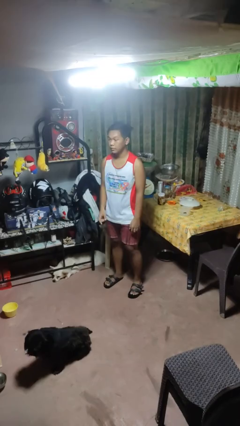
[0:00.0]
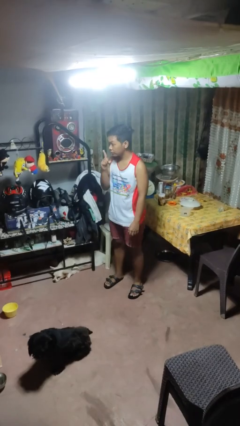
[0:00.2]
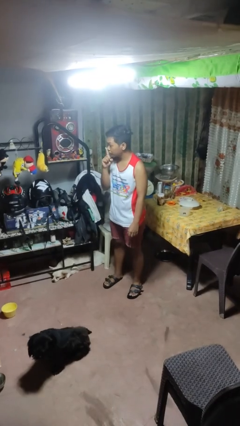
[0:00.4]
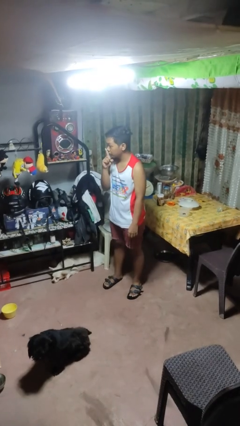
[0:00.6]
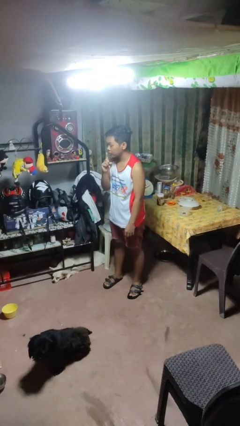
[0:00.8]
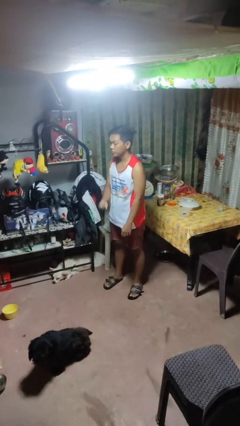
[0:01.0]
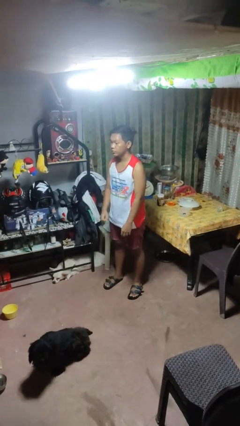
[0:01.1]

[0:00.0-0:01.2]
person gestures be quiet

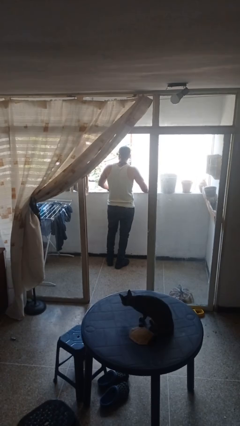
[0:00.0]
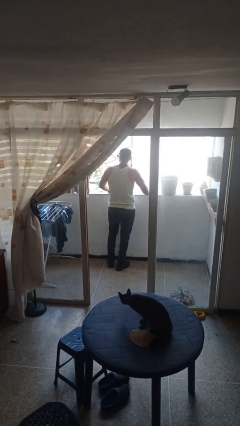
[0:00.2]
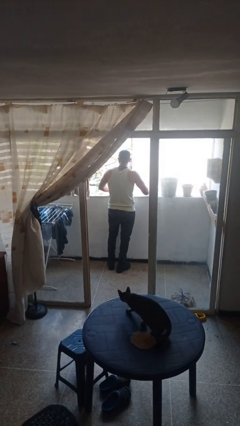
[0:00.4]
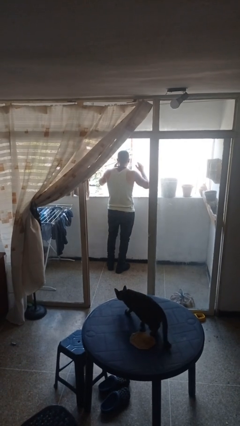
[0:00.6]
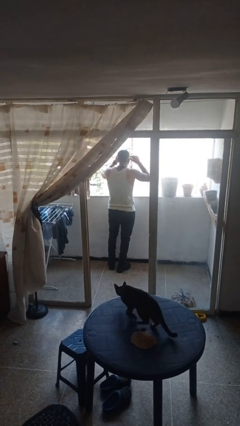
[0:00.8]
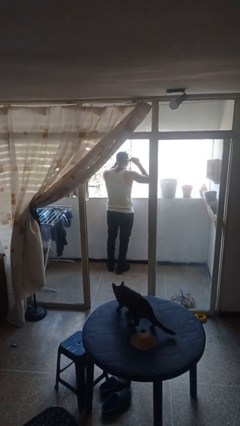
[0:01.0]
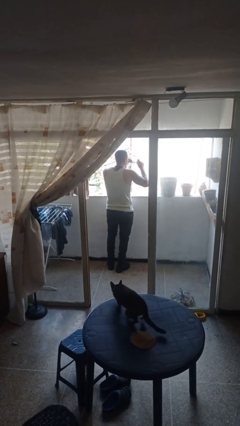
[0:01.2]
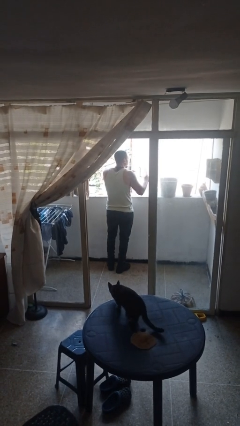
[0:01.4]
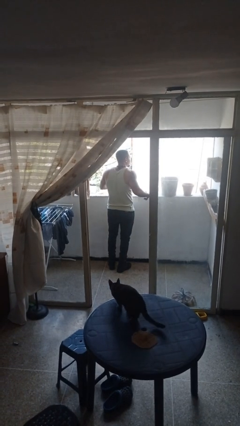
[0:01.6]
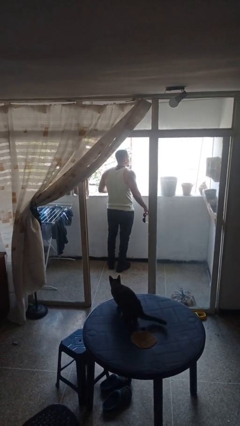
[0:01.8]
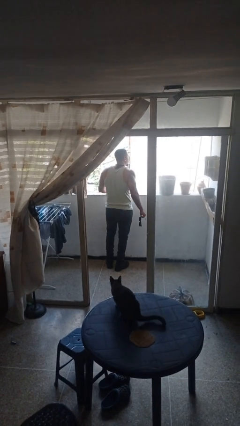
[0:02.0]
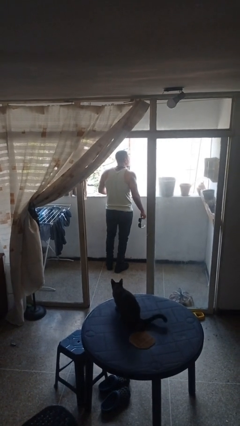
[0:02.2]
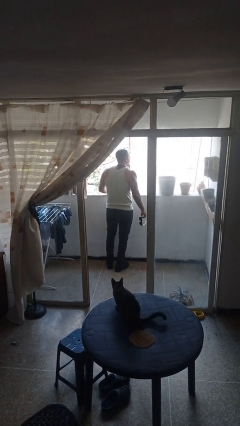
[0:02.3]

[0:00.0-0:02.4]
person takes off sunglasses

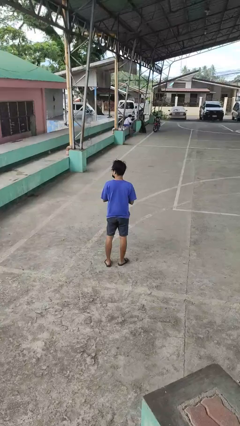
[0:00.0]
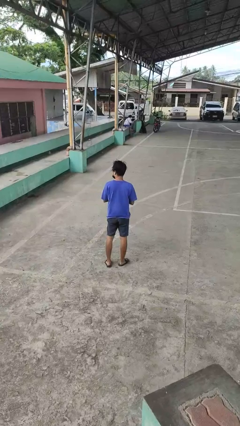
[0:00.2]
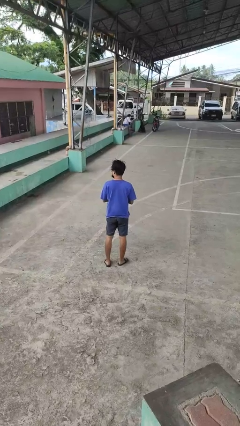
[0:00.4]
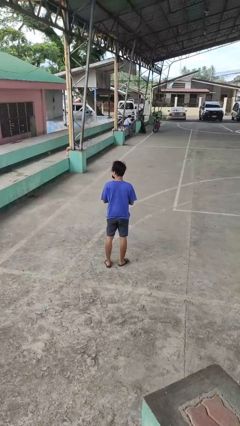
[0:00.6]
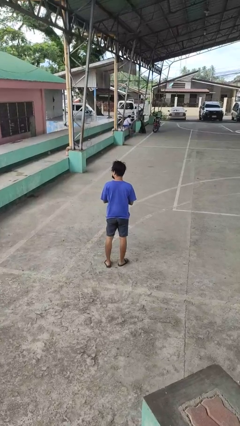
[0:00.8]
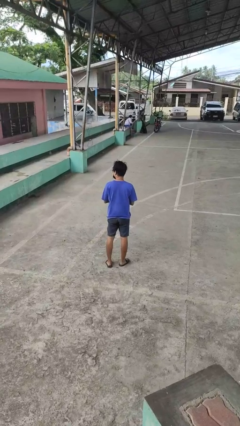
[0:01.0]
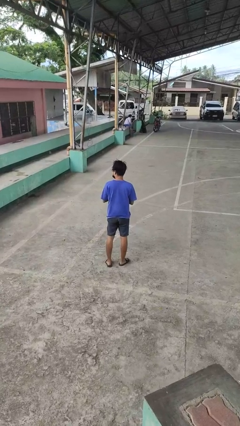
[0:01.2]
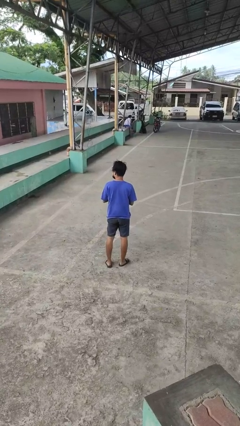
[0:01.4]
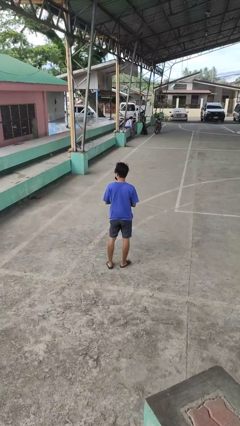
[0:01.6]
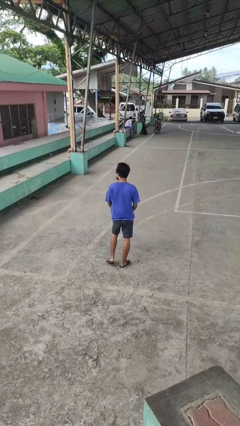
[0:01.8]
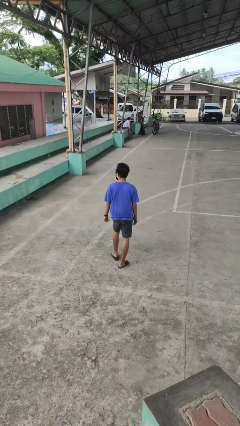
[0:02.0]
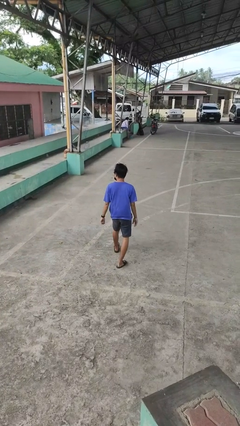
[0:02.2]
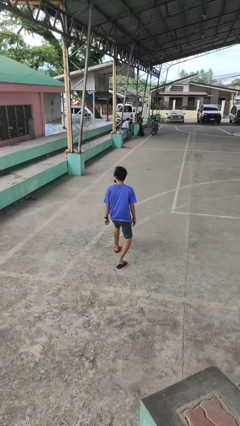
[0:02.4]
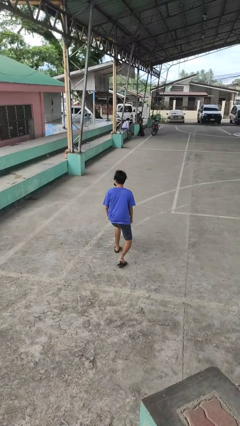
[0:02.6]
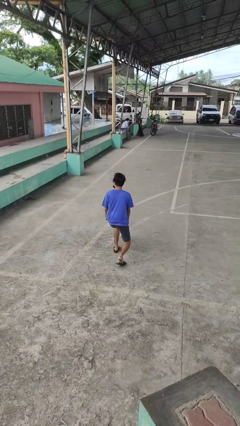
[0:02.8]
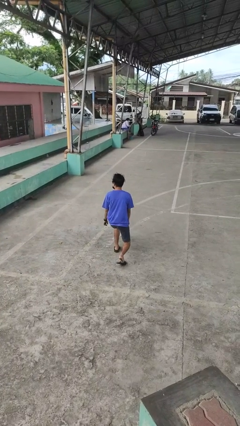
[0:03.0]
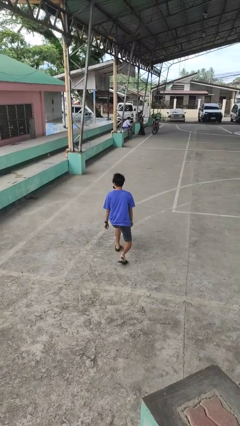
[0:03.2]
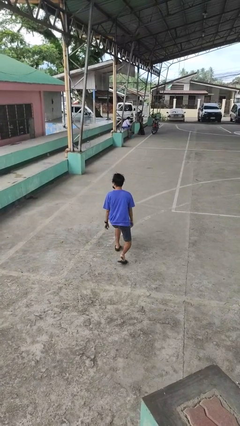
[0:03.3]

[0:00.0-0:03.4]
person exercises with lunges

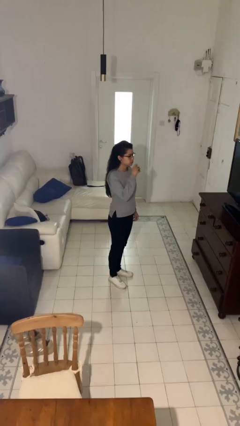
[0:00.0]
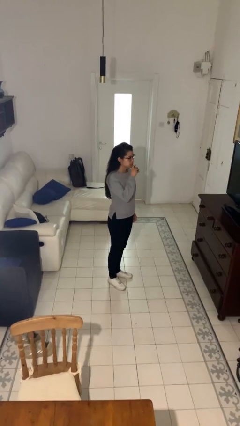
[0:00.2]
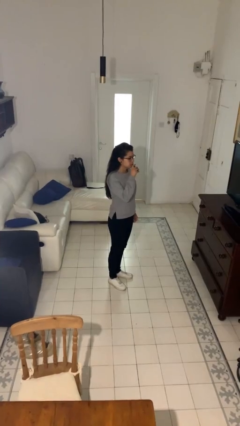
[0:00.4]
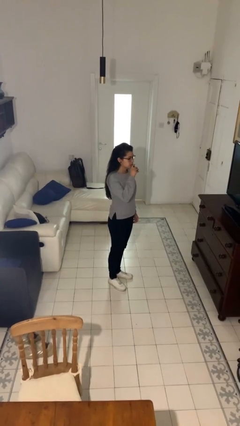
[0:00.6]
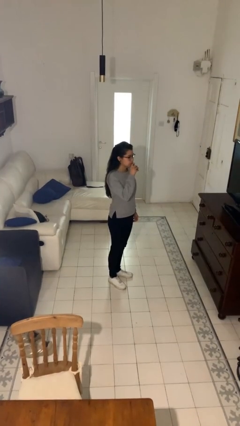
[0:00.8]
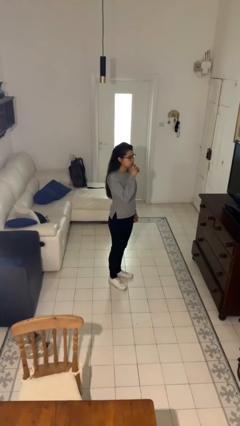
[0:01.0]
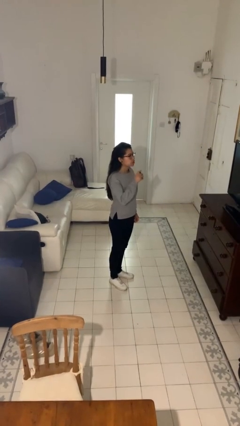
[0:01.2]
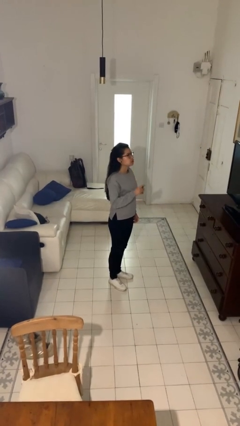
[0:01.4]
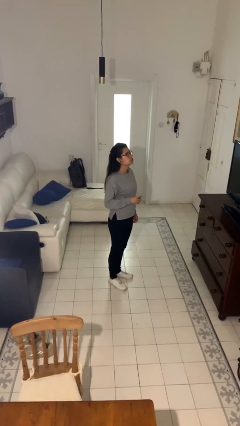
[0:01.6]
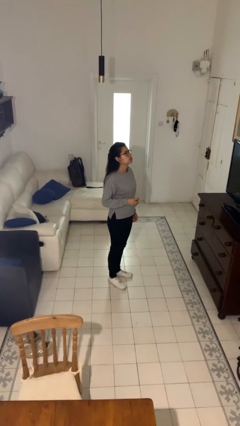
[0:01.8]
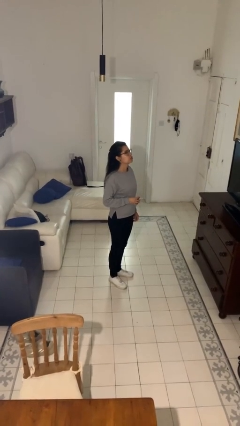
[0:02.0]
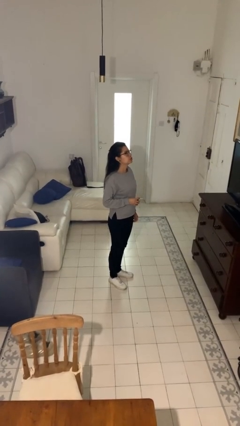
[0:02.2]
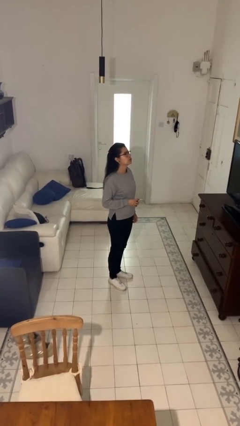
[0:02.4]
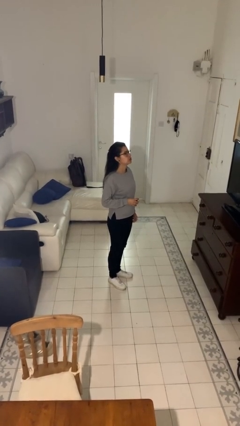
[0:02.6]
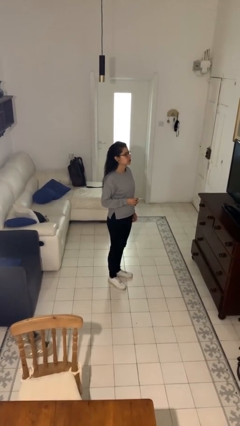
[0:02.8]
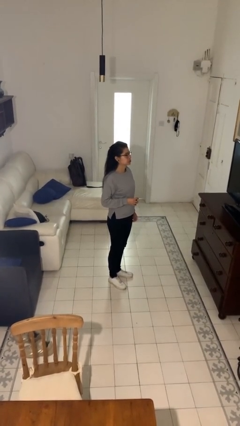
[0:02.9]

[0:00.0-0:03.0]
person vapes

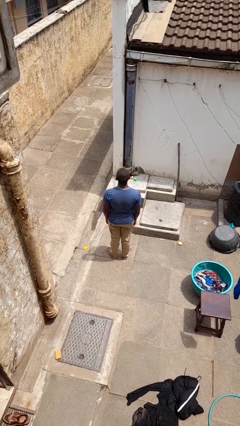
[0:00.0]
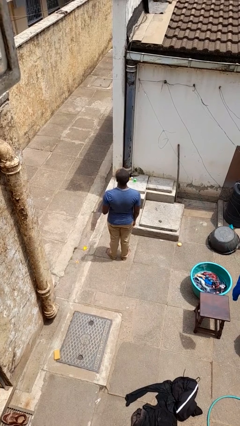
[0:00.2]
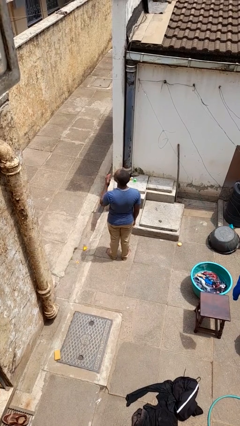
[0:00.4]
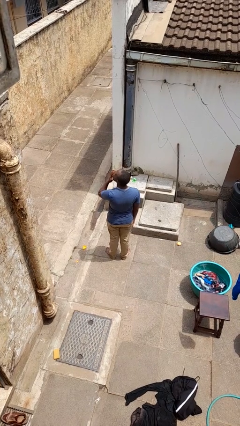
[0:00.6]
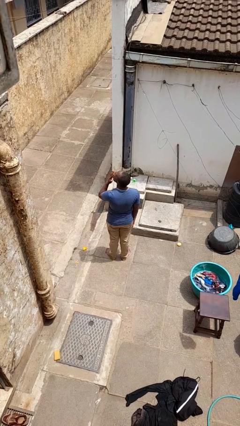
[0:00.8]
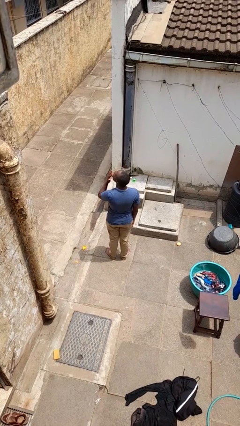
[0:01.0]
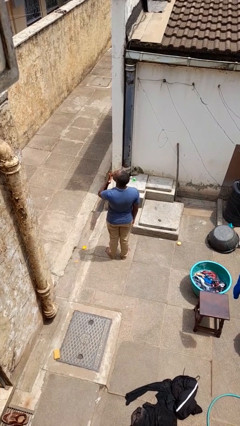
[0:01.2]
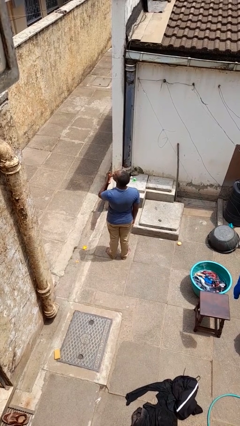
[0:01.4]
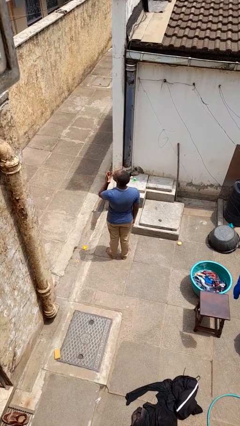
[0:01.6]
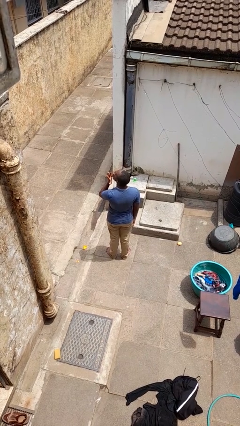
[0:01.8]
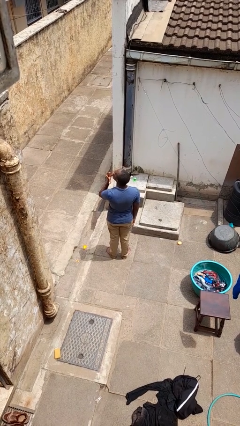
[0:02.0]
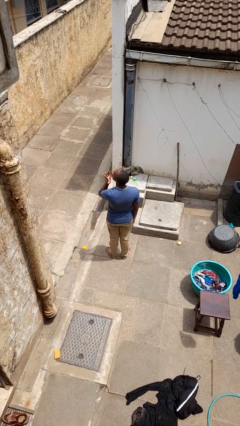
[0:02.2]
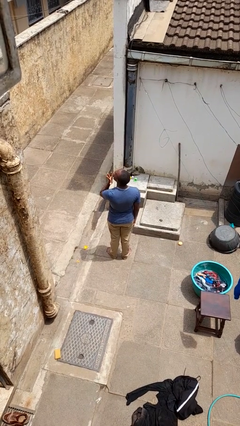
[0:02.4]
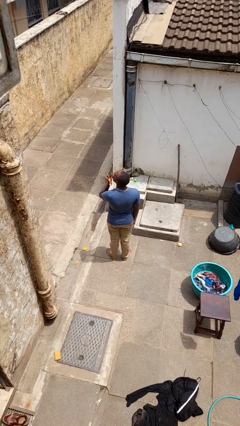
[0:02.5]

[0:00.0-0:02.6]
person licks fingers

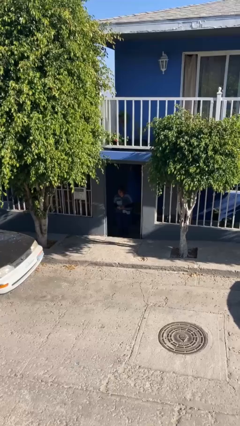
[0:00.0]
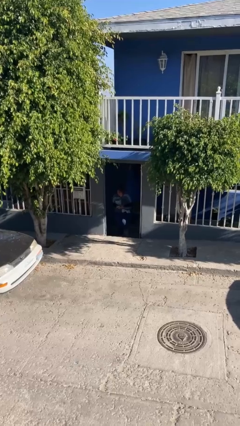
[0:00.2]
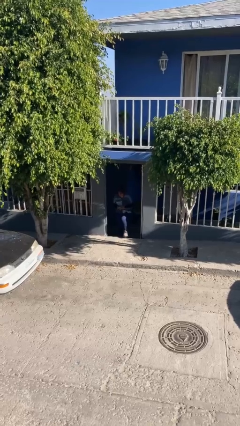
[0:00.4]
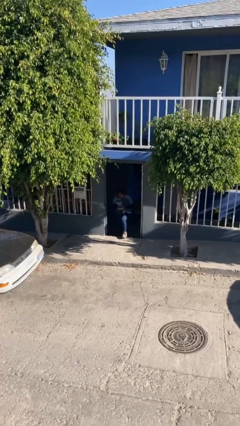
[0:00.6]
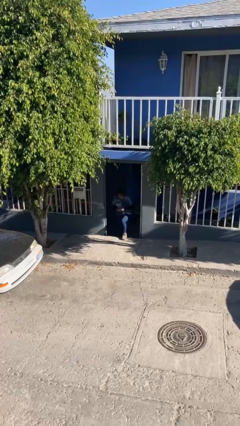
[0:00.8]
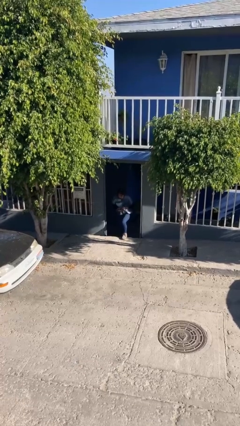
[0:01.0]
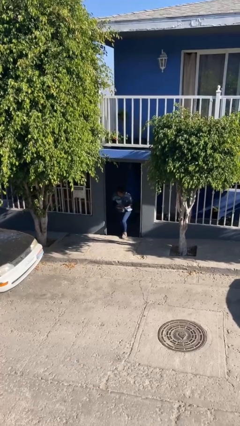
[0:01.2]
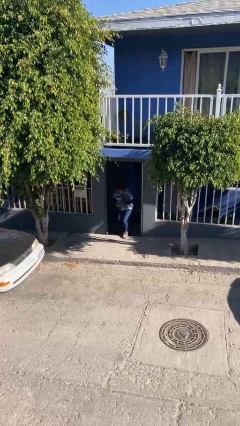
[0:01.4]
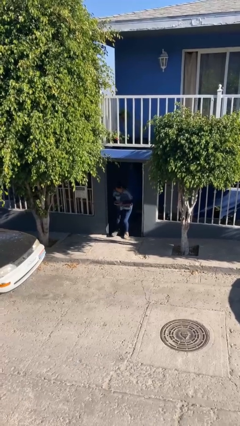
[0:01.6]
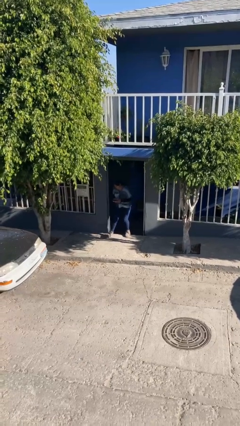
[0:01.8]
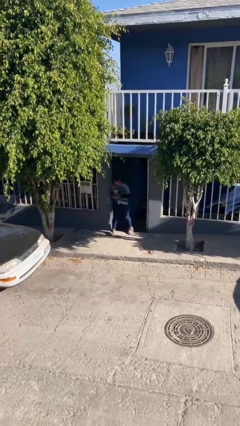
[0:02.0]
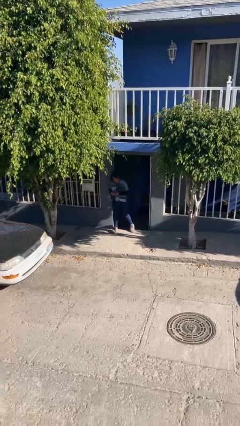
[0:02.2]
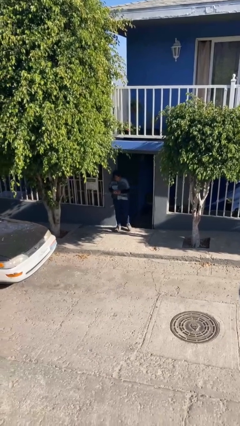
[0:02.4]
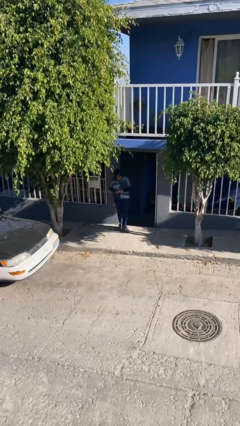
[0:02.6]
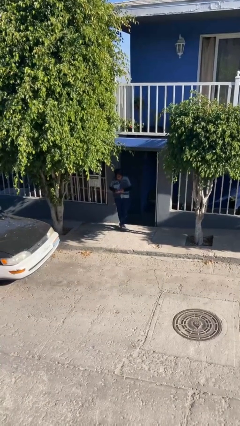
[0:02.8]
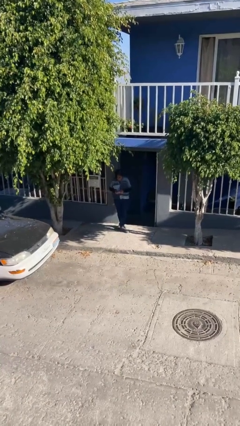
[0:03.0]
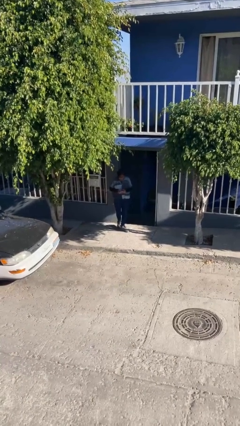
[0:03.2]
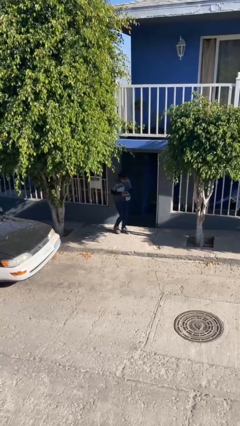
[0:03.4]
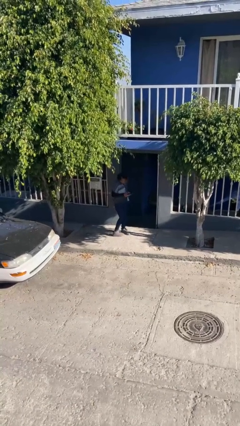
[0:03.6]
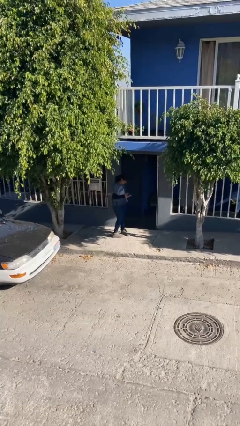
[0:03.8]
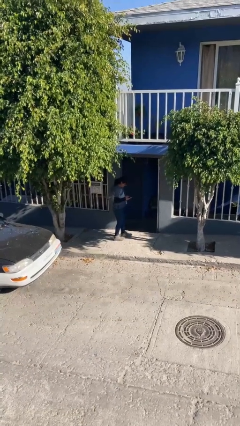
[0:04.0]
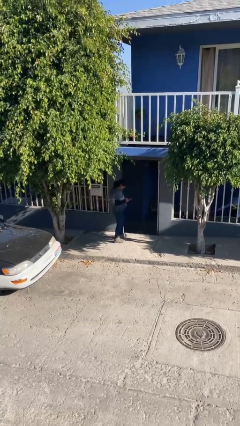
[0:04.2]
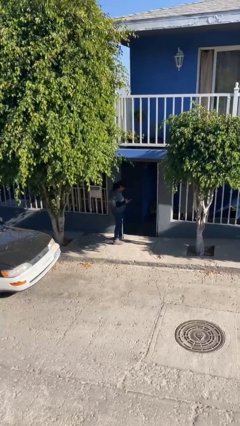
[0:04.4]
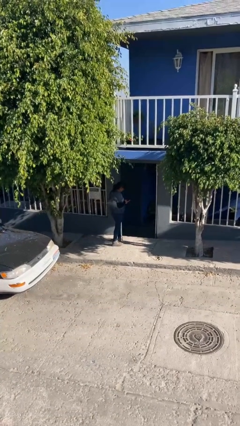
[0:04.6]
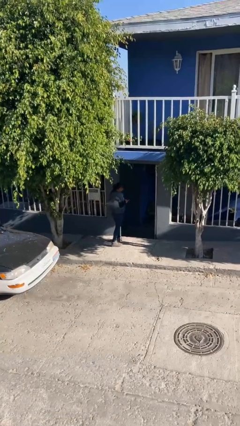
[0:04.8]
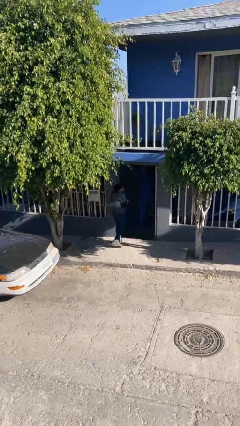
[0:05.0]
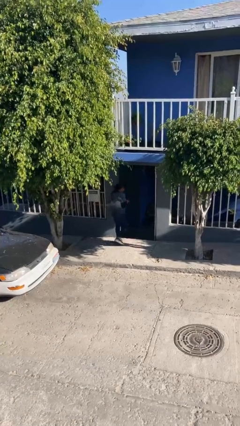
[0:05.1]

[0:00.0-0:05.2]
person enters scene through structure

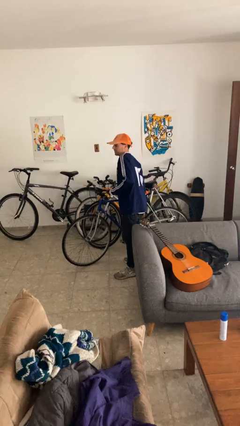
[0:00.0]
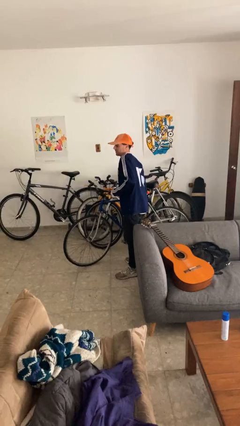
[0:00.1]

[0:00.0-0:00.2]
person carries bicycle
